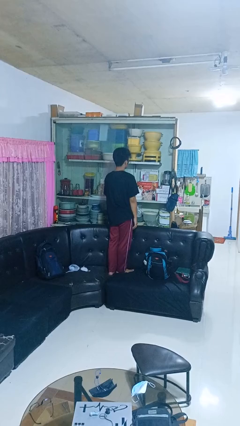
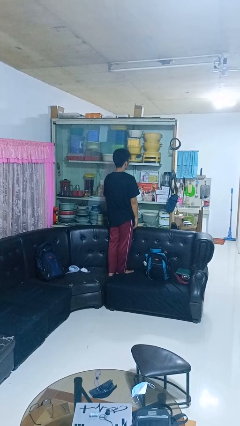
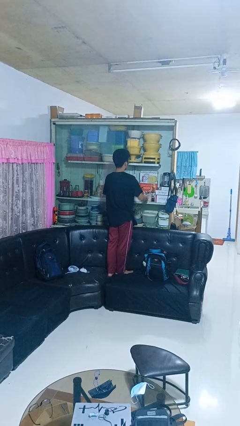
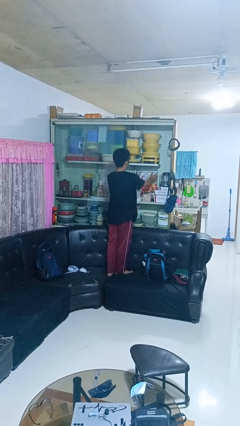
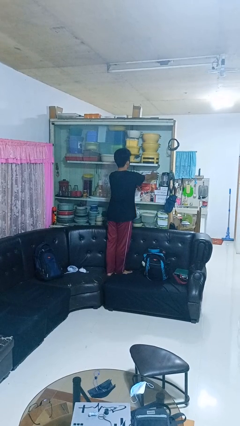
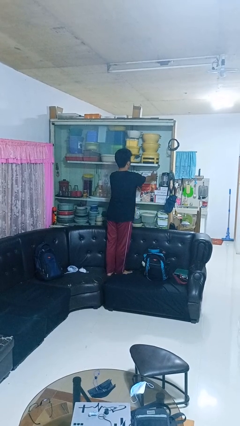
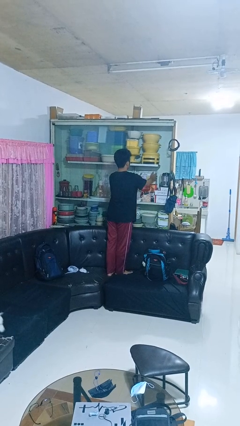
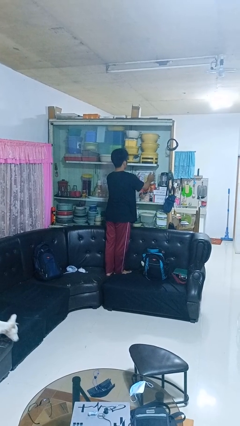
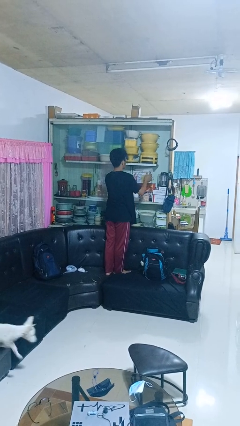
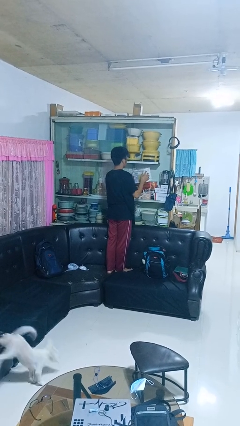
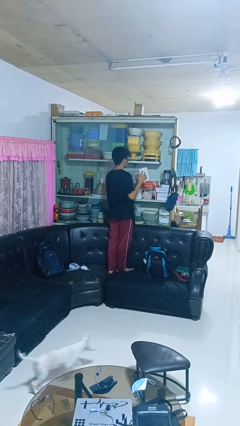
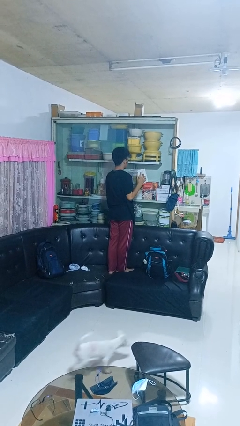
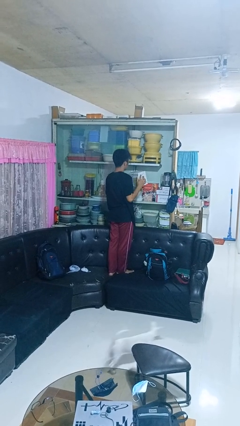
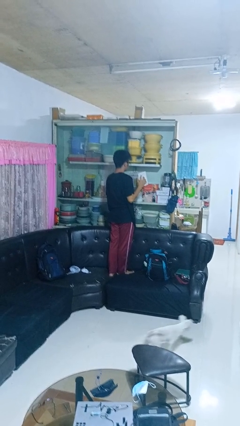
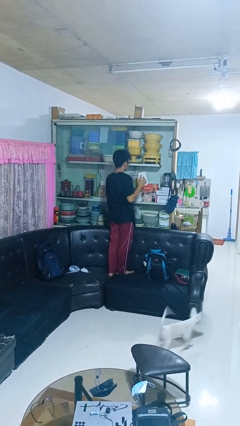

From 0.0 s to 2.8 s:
person picks up object from cabinet

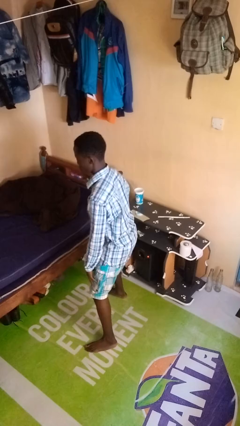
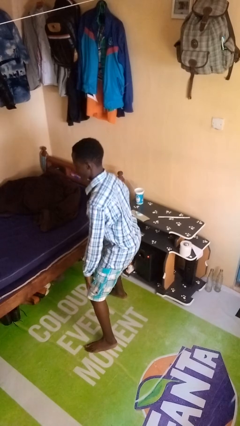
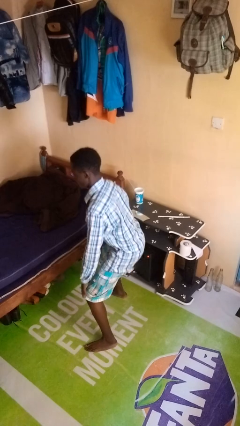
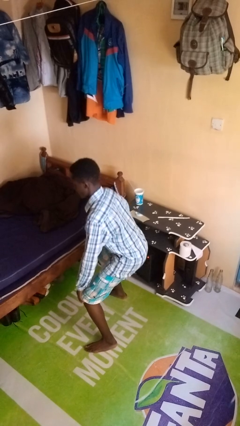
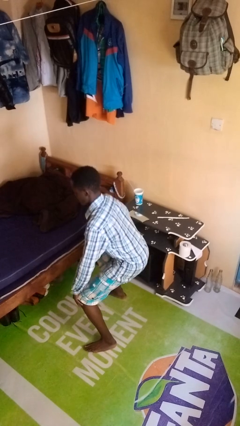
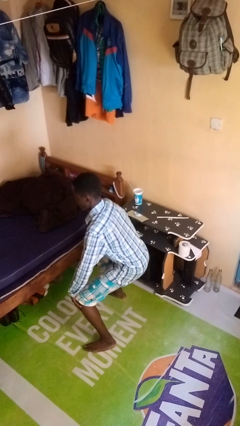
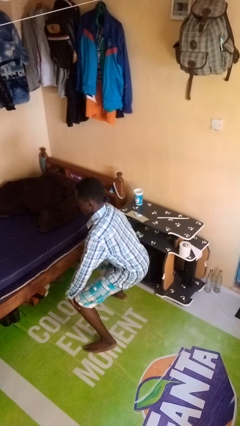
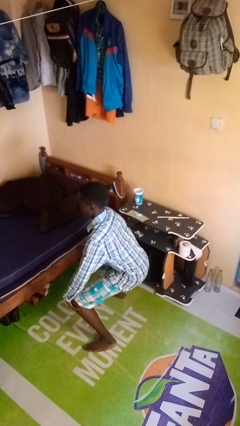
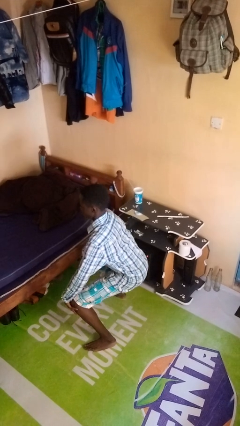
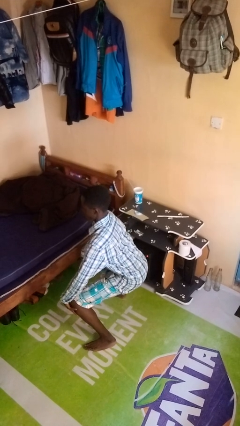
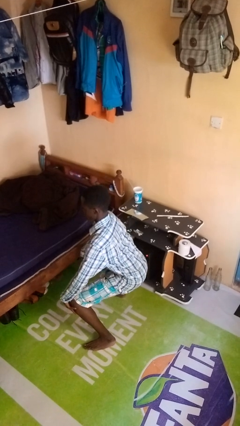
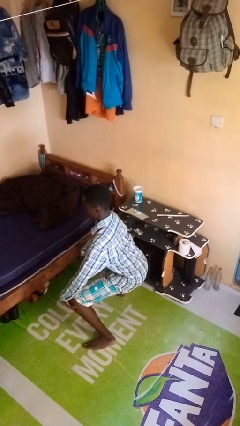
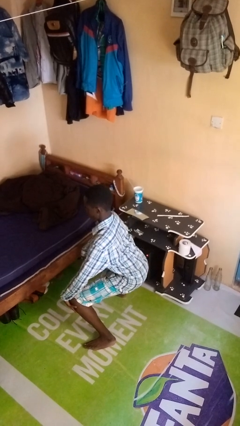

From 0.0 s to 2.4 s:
person squats

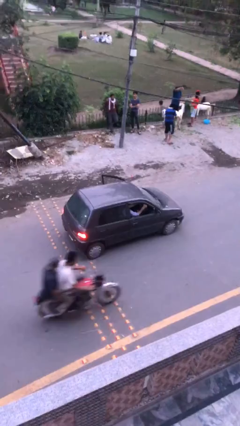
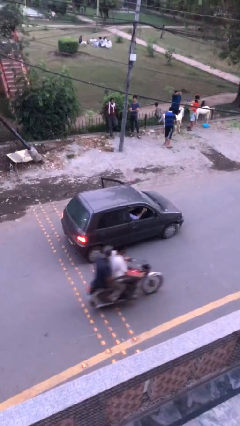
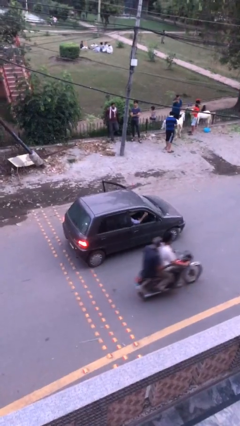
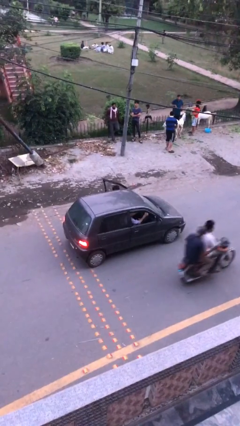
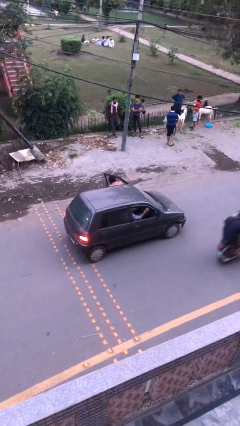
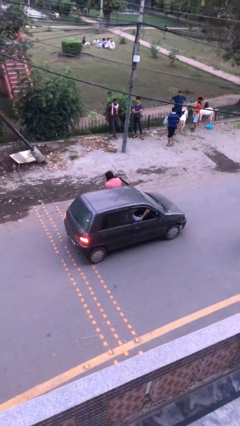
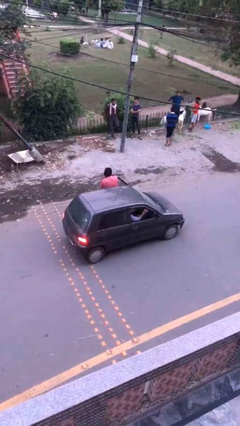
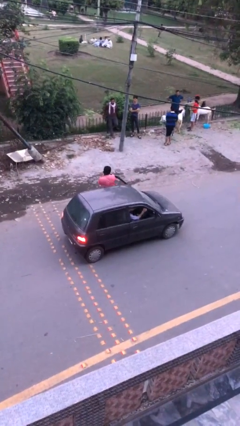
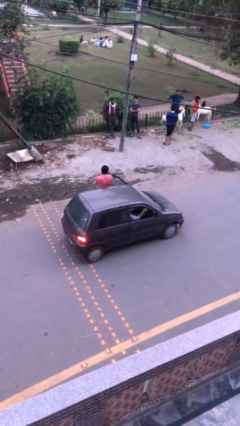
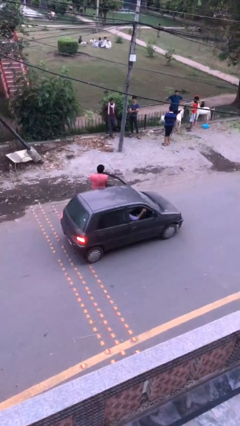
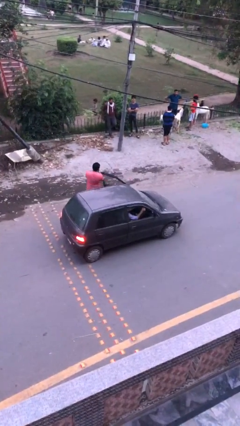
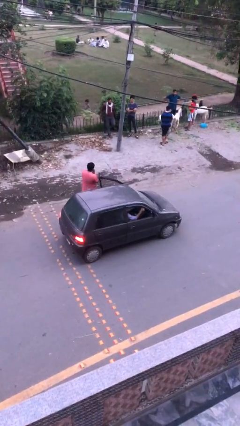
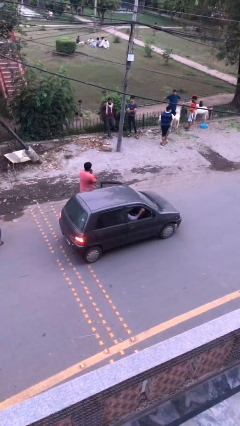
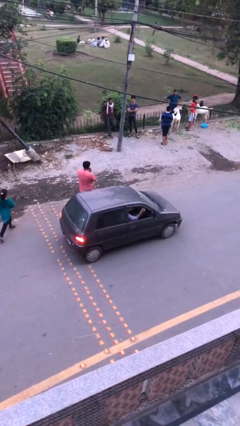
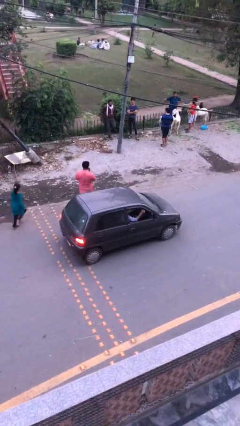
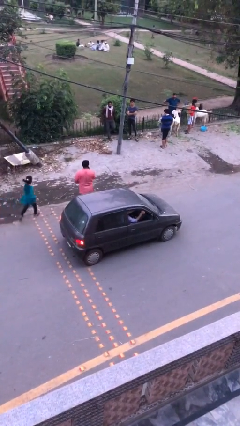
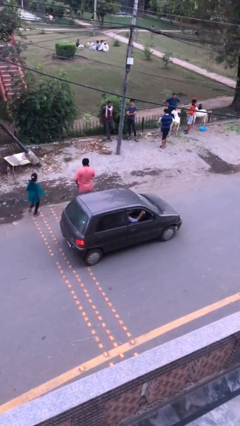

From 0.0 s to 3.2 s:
car drops off person

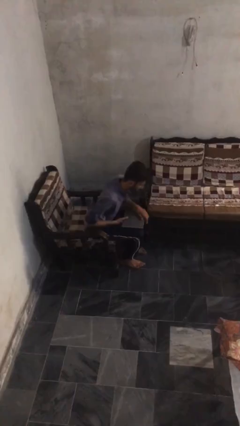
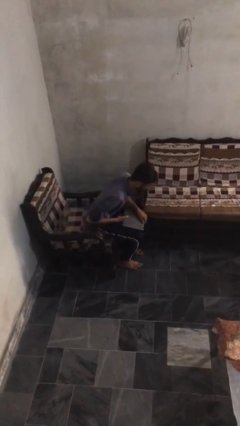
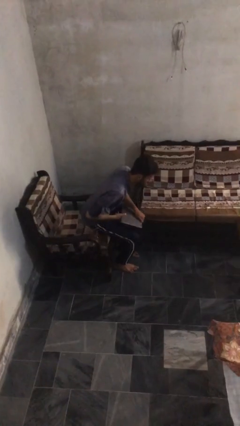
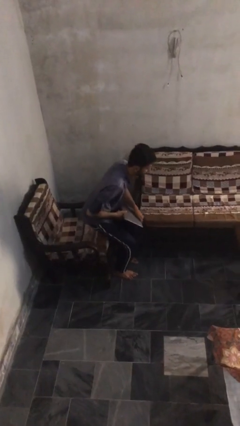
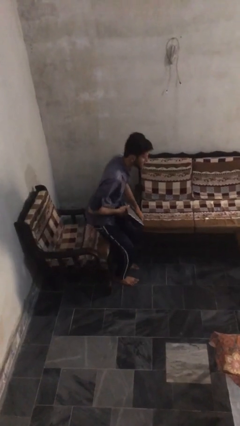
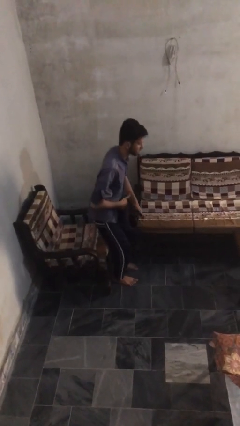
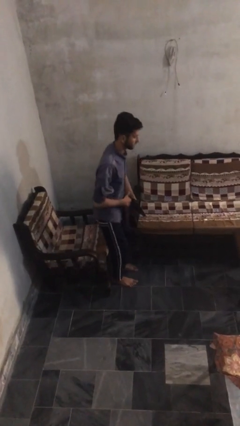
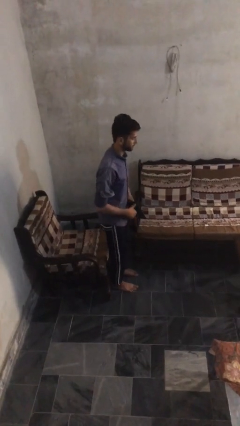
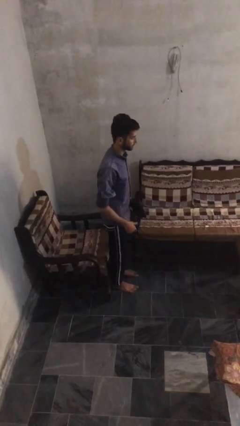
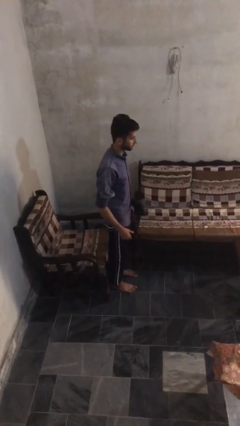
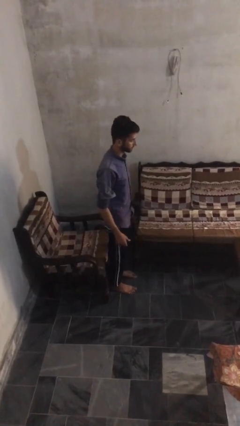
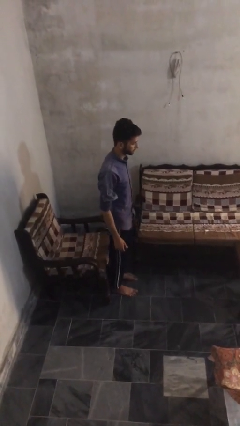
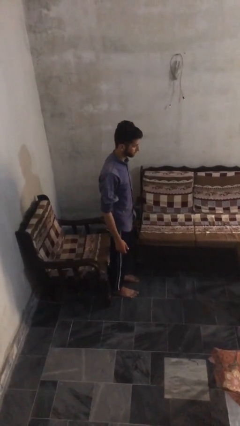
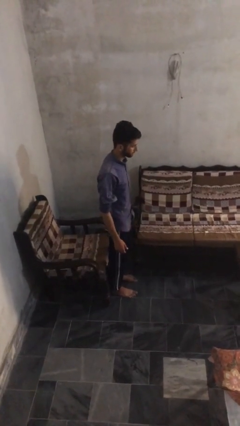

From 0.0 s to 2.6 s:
person stands up

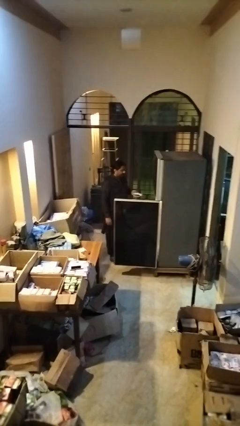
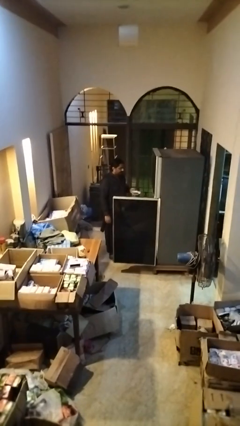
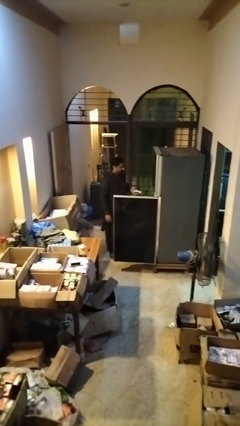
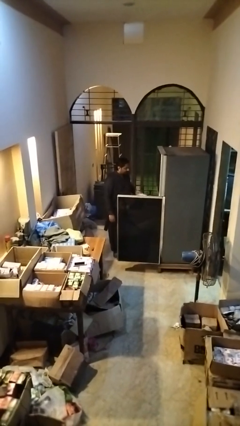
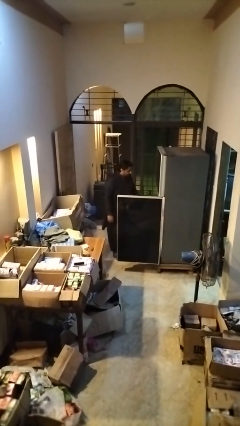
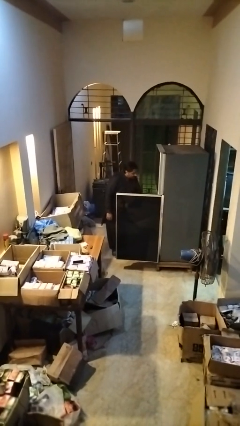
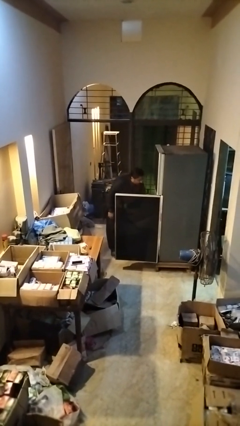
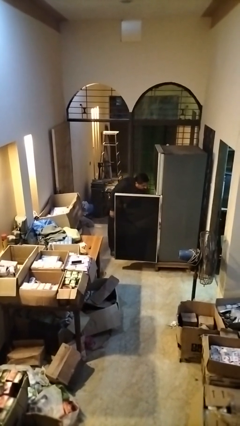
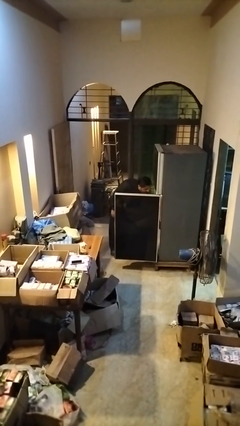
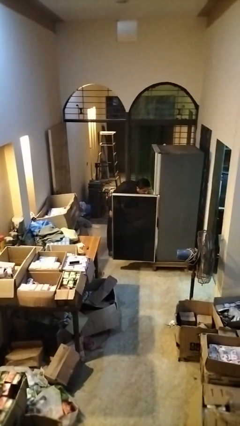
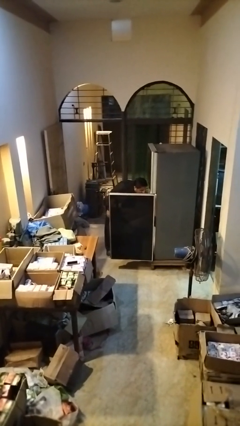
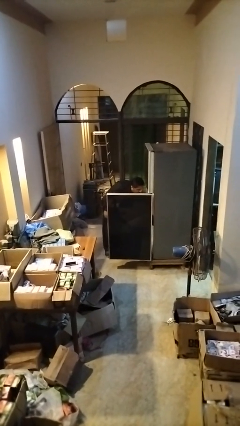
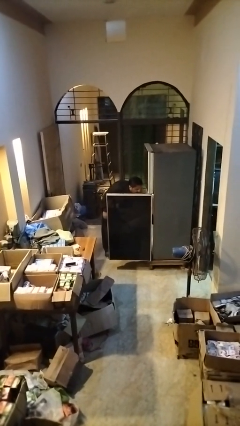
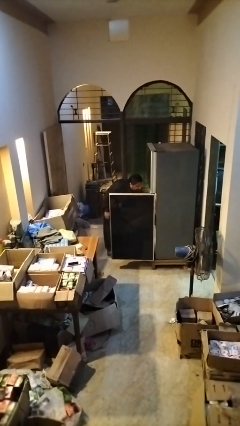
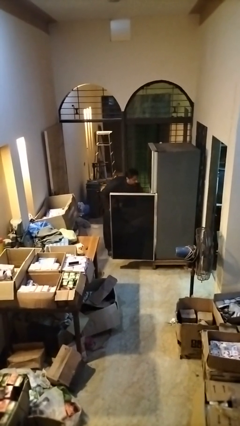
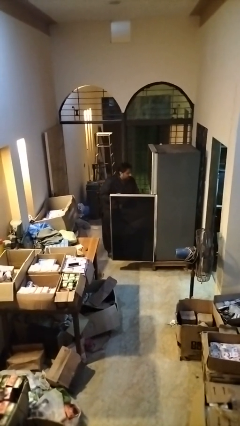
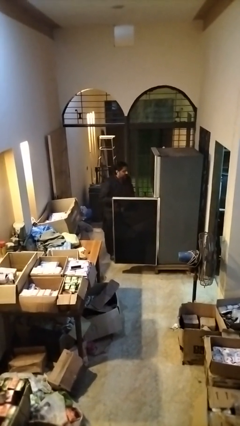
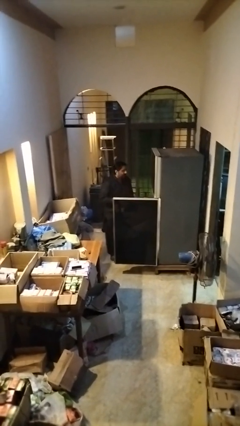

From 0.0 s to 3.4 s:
person takes object from refrigerator

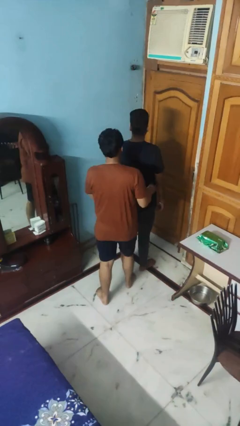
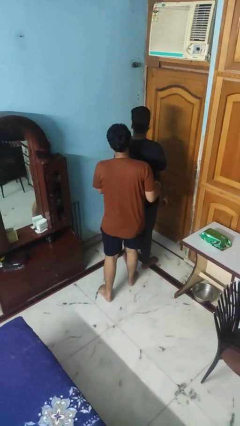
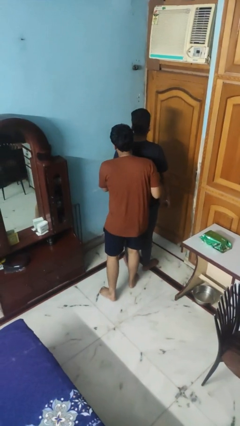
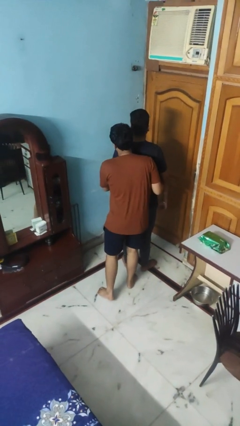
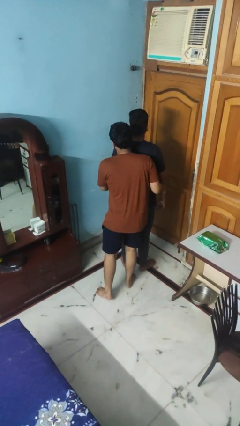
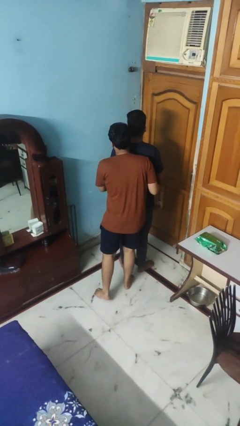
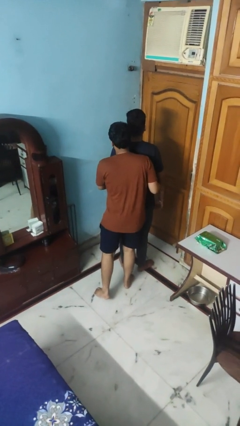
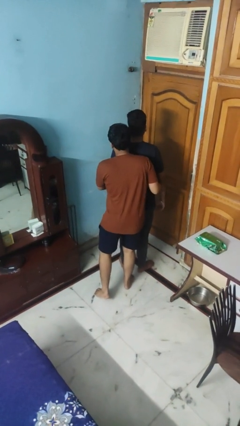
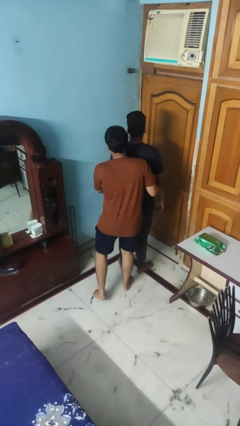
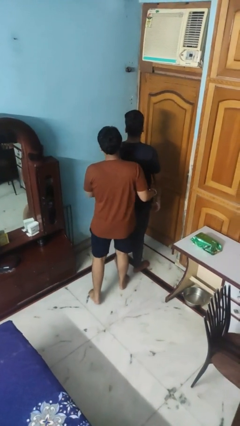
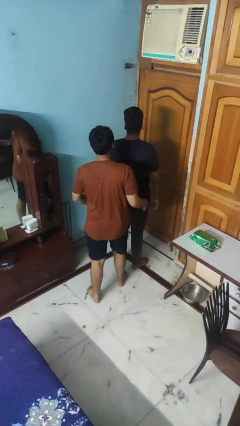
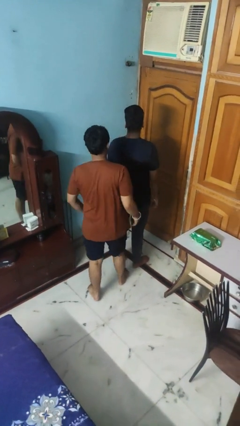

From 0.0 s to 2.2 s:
person hugs person from behind

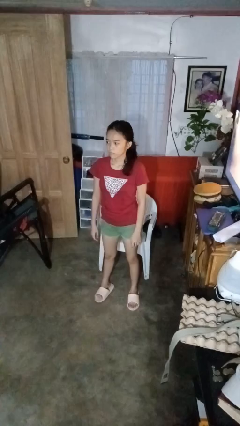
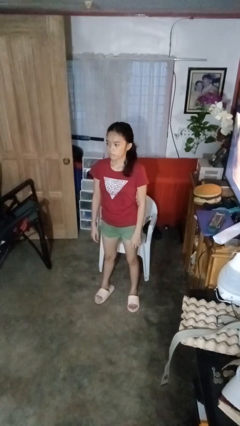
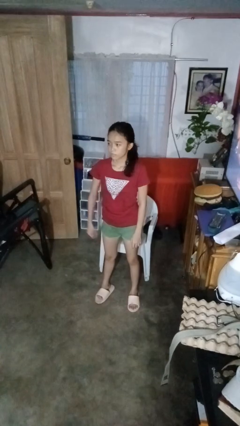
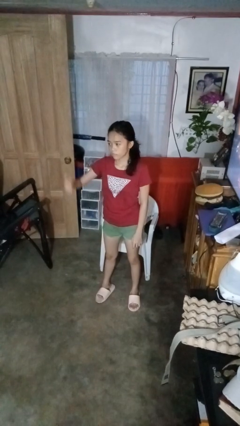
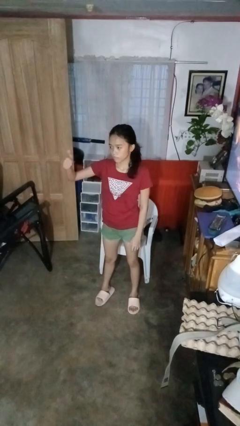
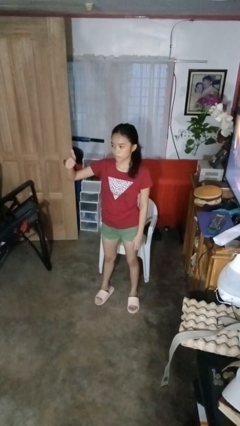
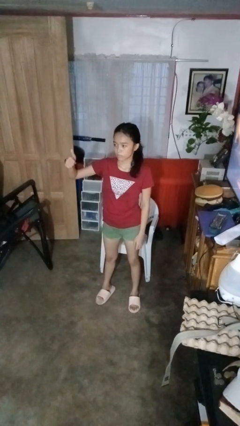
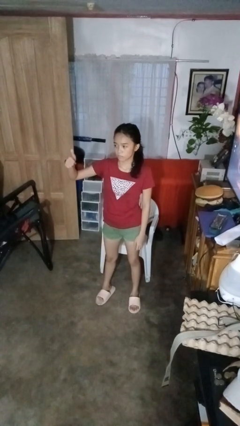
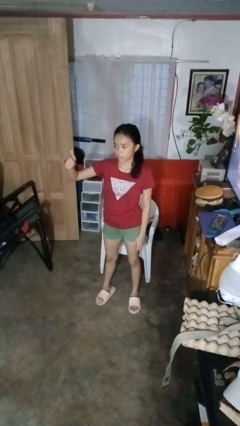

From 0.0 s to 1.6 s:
person gestures thumbs up
